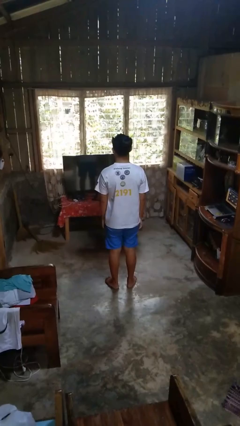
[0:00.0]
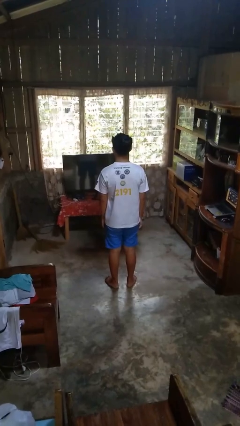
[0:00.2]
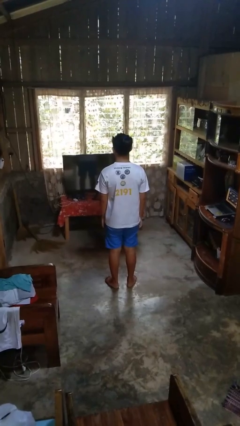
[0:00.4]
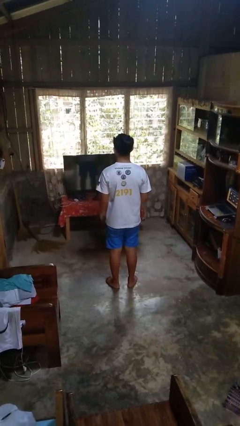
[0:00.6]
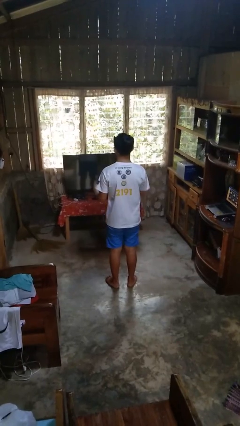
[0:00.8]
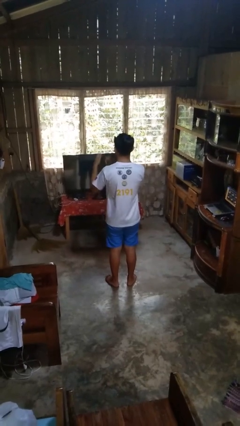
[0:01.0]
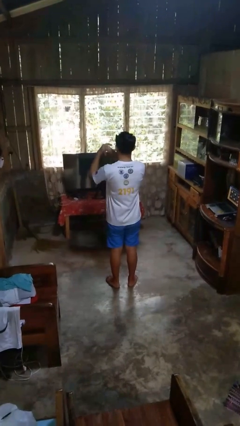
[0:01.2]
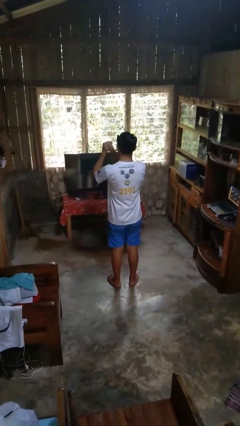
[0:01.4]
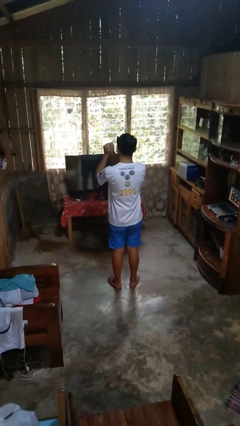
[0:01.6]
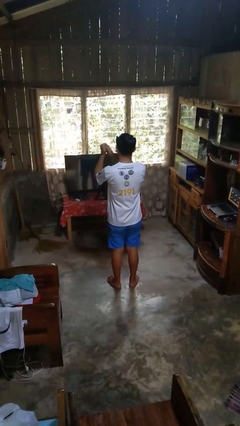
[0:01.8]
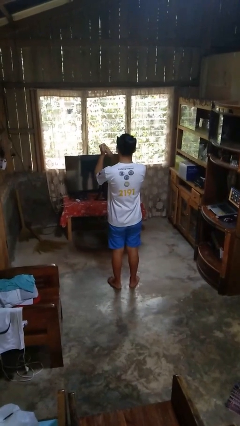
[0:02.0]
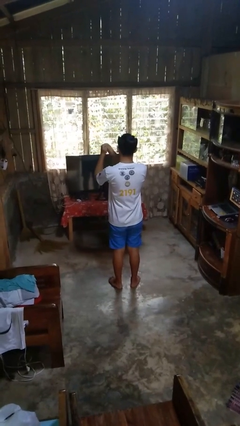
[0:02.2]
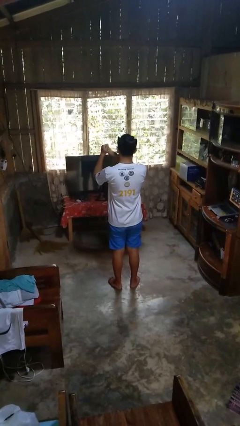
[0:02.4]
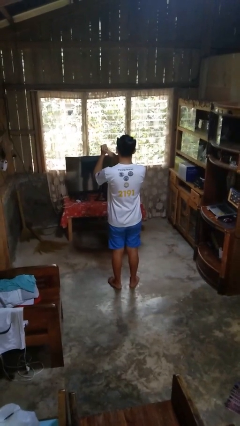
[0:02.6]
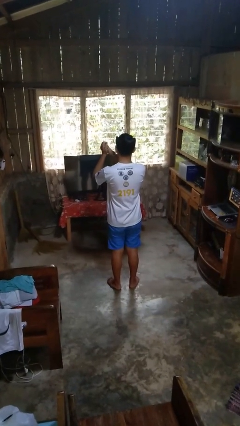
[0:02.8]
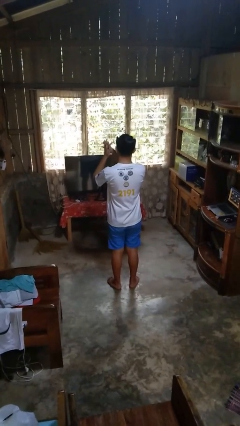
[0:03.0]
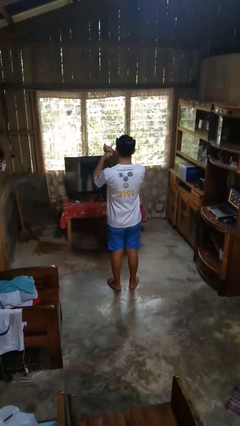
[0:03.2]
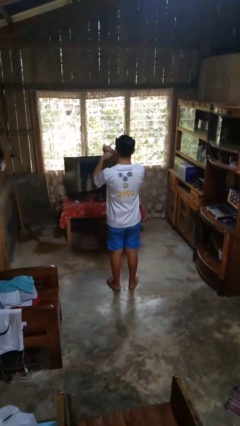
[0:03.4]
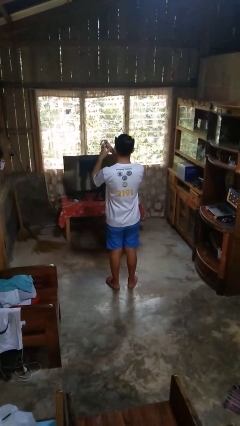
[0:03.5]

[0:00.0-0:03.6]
person cracks knuckles

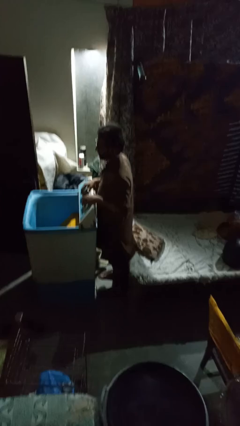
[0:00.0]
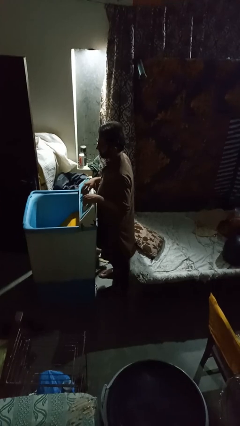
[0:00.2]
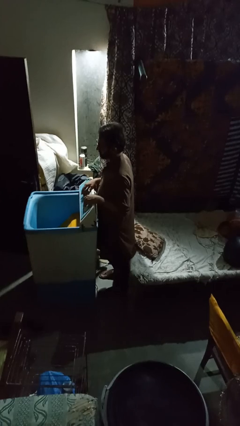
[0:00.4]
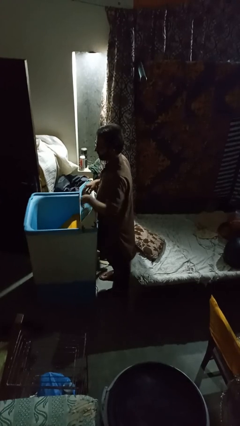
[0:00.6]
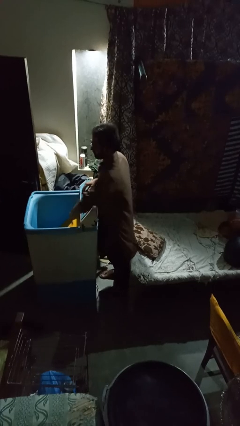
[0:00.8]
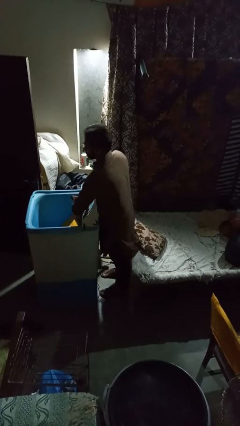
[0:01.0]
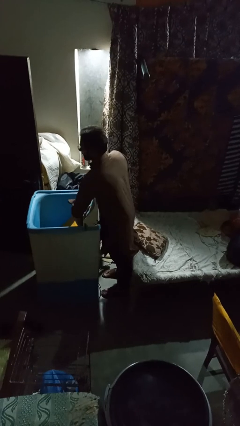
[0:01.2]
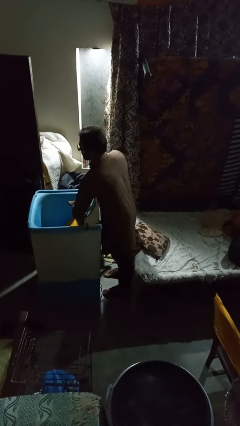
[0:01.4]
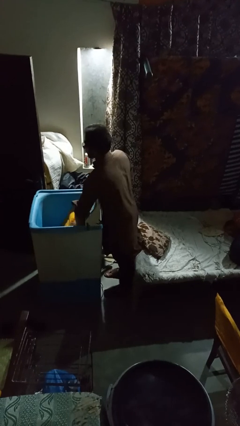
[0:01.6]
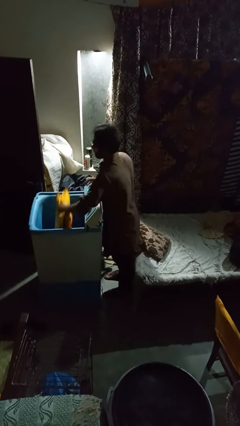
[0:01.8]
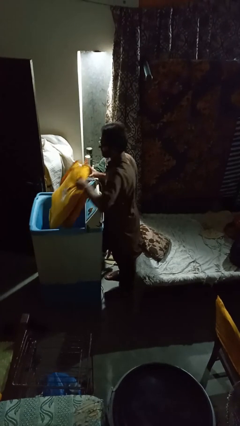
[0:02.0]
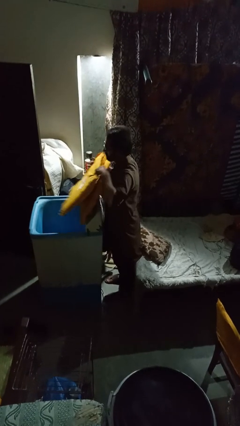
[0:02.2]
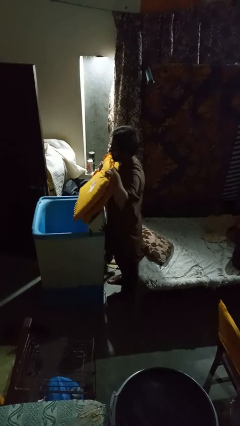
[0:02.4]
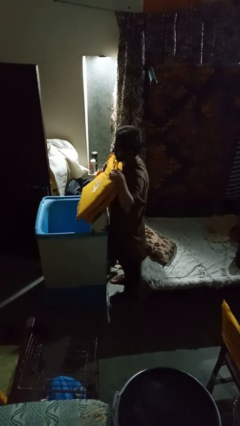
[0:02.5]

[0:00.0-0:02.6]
person unloads clotheswasher

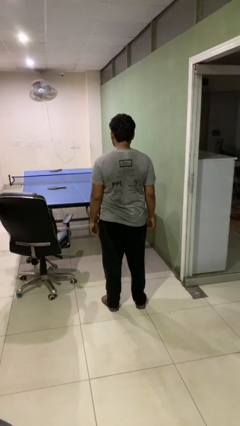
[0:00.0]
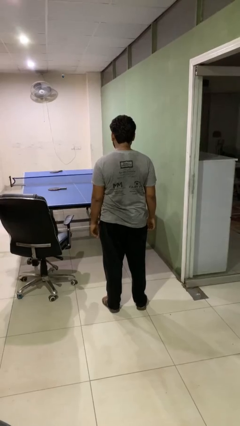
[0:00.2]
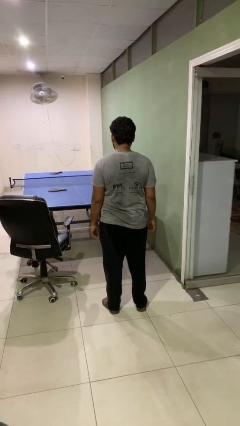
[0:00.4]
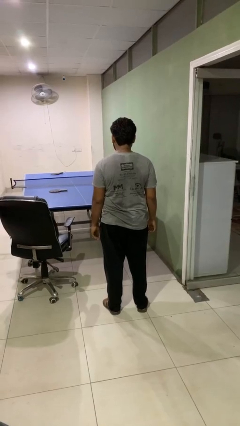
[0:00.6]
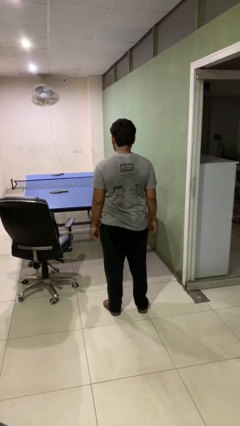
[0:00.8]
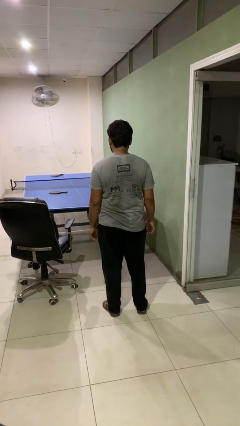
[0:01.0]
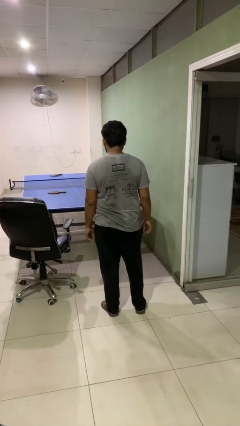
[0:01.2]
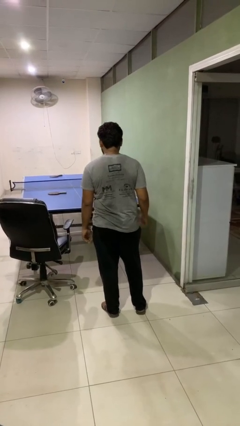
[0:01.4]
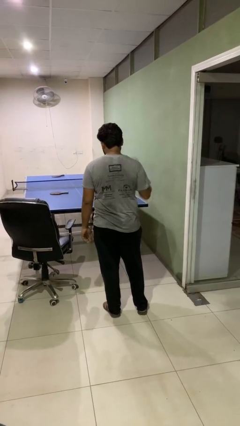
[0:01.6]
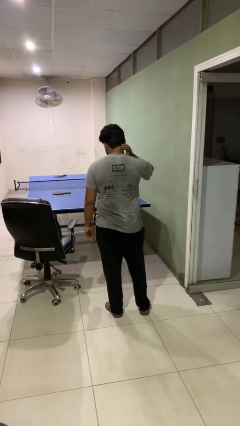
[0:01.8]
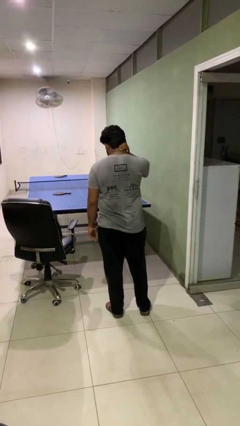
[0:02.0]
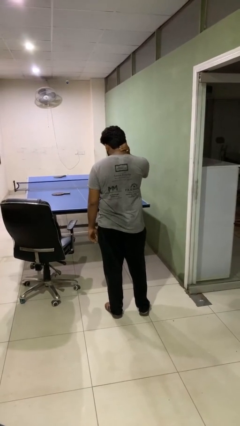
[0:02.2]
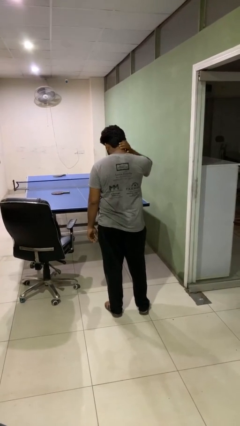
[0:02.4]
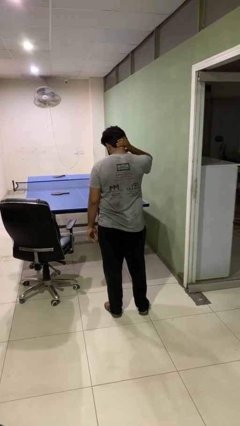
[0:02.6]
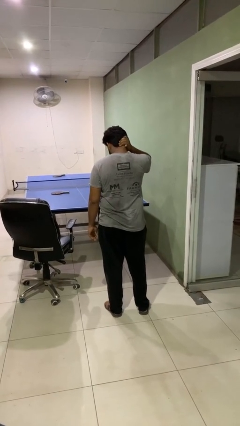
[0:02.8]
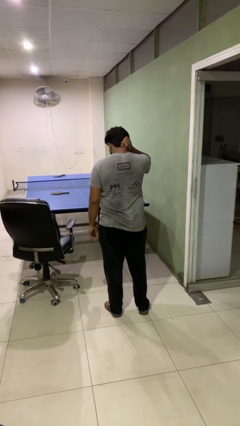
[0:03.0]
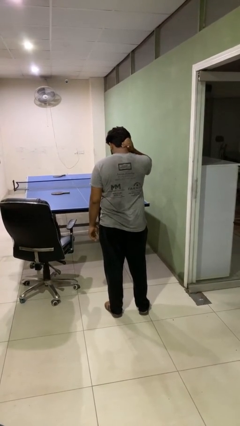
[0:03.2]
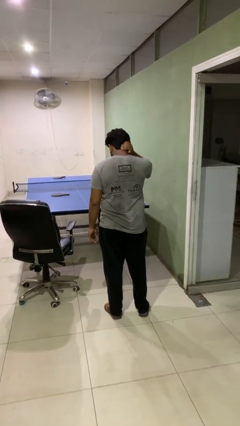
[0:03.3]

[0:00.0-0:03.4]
person rubs neck

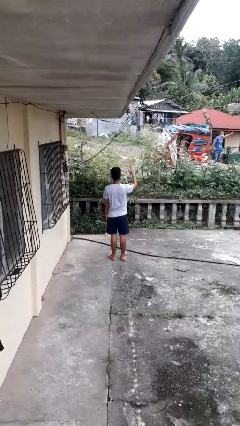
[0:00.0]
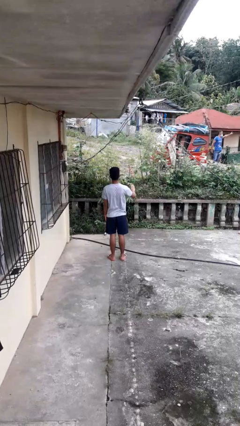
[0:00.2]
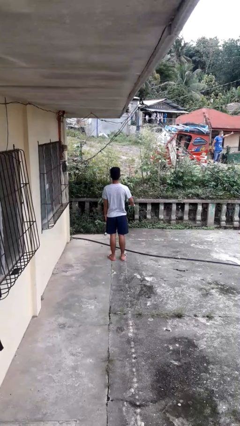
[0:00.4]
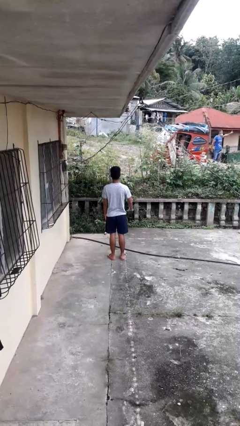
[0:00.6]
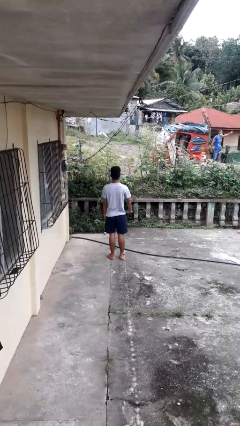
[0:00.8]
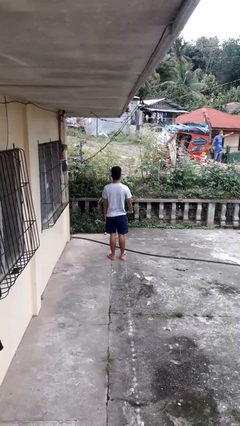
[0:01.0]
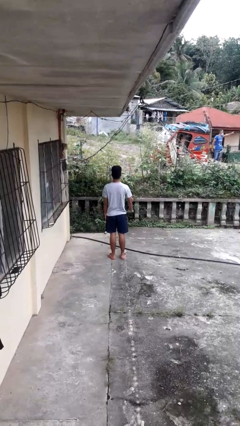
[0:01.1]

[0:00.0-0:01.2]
person gestures swipe down

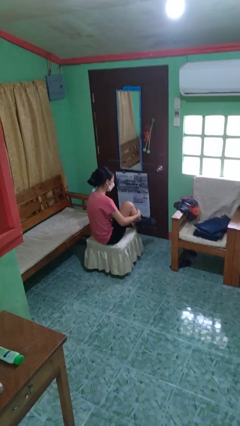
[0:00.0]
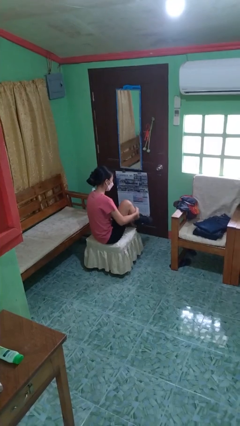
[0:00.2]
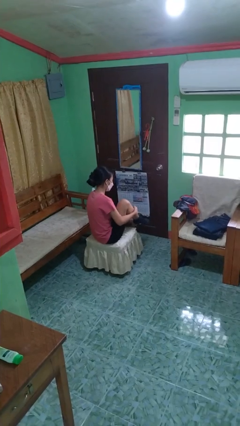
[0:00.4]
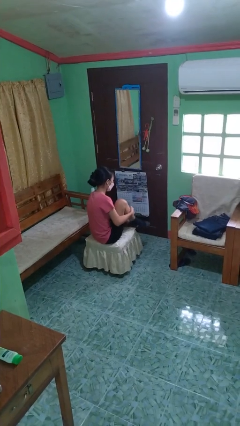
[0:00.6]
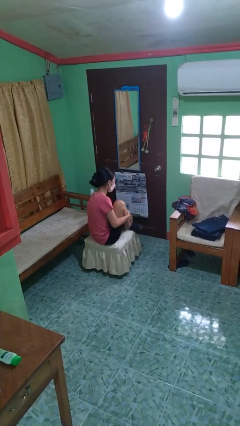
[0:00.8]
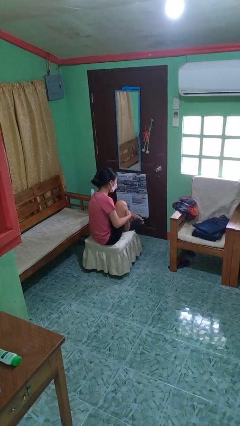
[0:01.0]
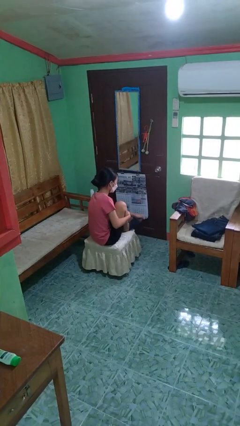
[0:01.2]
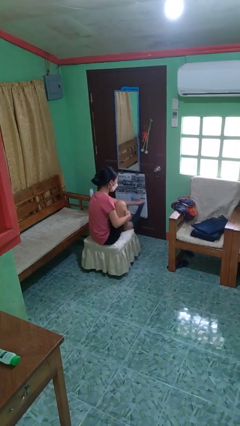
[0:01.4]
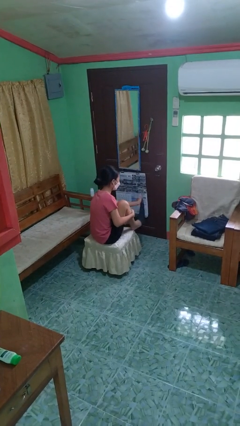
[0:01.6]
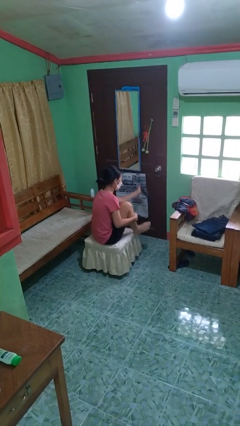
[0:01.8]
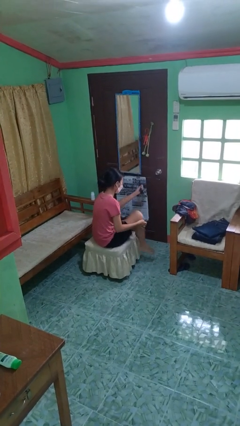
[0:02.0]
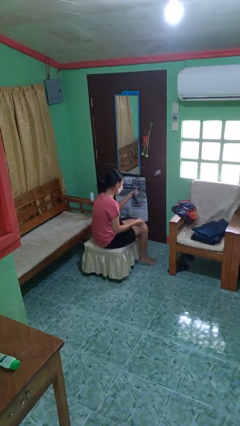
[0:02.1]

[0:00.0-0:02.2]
person takes off socks

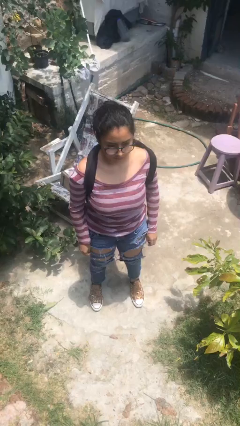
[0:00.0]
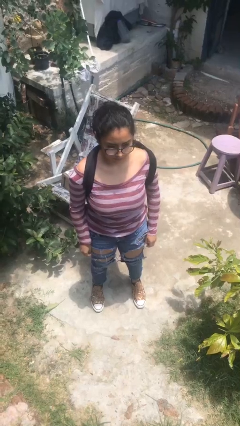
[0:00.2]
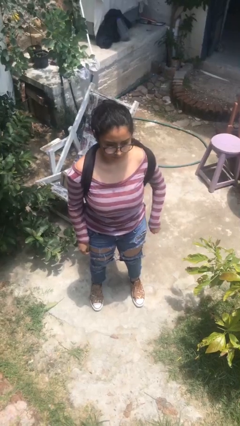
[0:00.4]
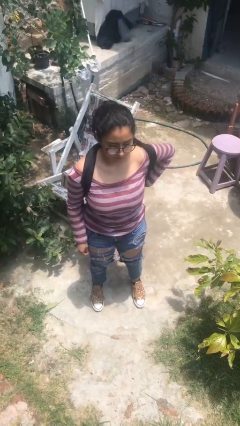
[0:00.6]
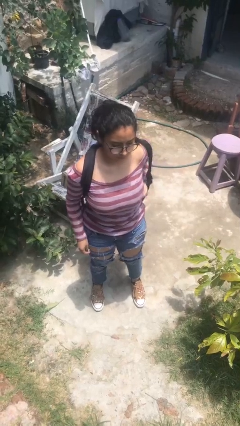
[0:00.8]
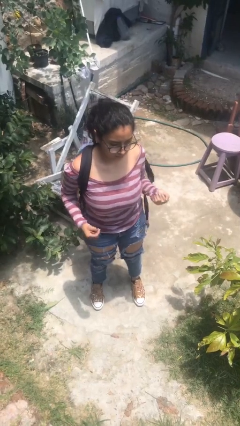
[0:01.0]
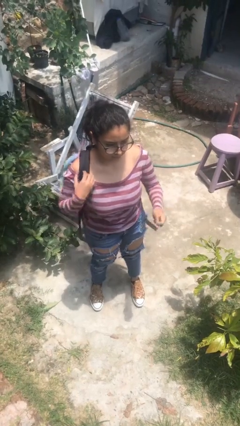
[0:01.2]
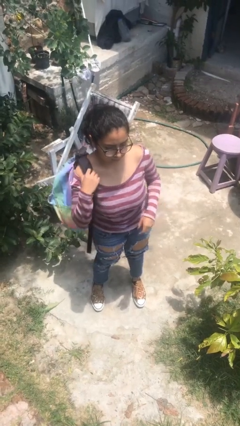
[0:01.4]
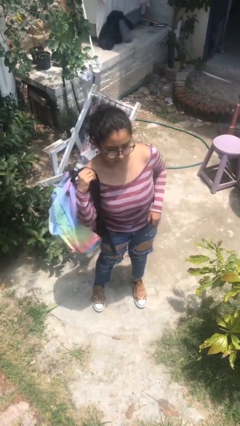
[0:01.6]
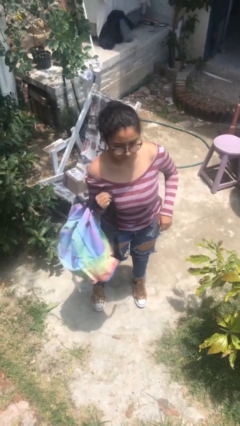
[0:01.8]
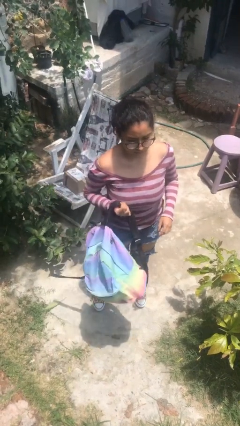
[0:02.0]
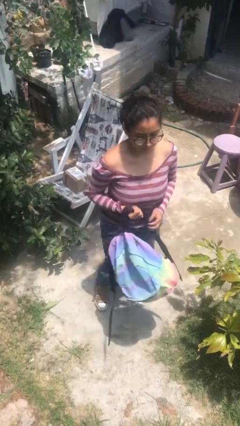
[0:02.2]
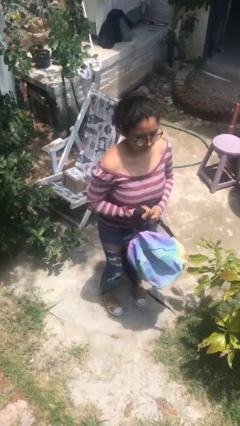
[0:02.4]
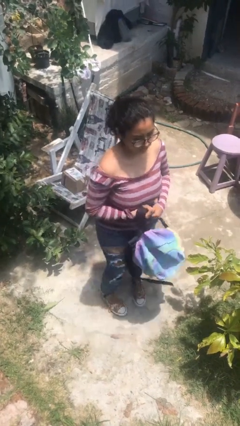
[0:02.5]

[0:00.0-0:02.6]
person takes off backpack

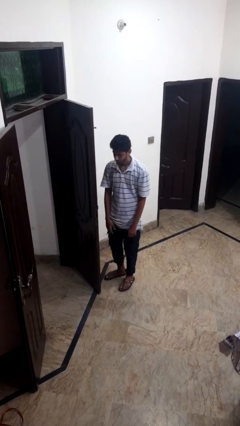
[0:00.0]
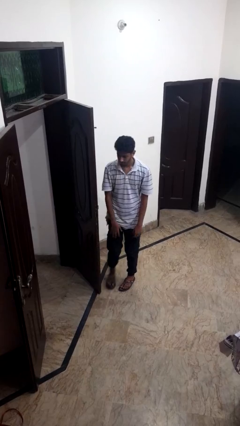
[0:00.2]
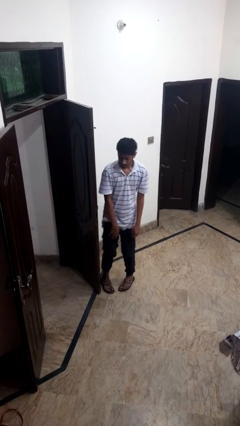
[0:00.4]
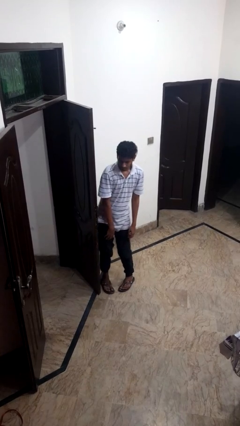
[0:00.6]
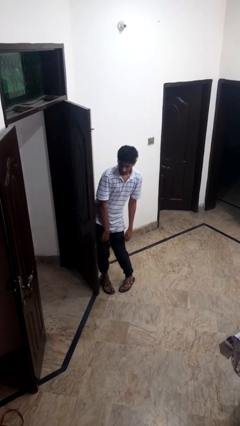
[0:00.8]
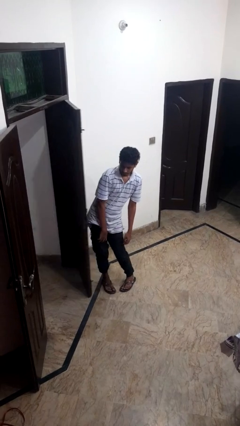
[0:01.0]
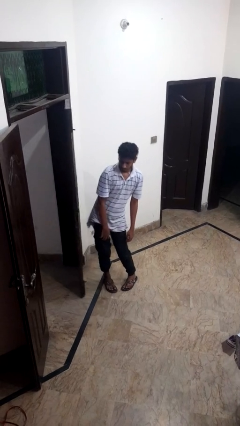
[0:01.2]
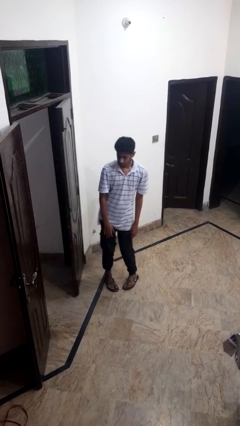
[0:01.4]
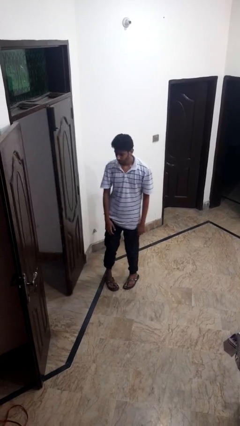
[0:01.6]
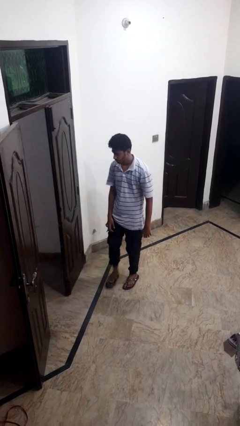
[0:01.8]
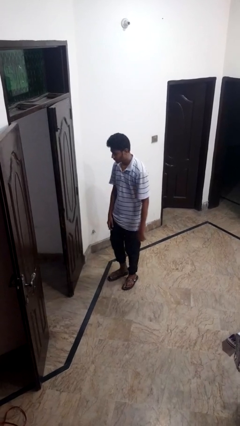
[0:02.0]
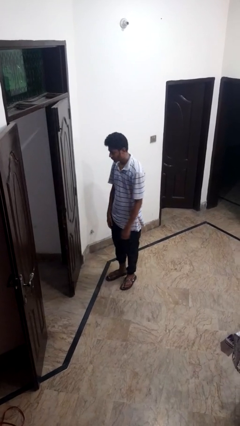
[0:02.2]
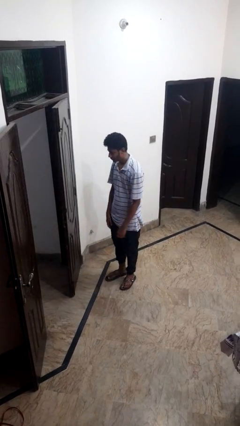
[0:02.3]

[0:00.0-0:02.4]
person closes door with hip
